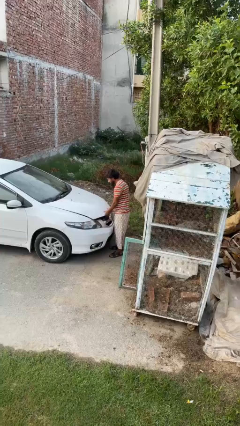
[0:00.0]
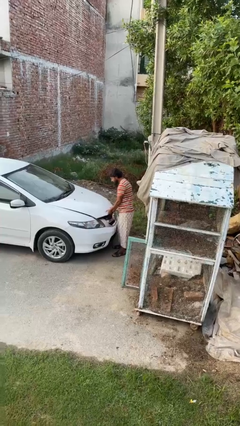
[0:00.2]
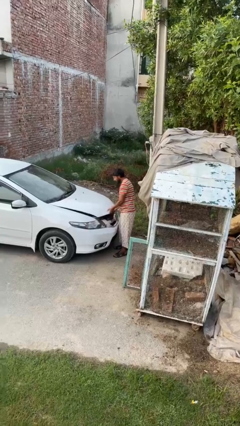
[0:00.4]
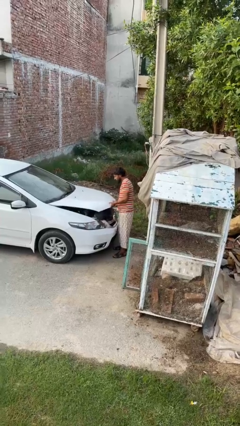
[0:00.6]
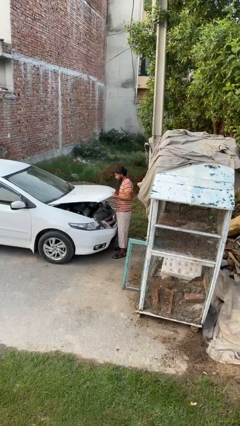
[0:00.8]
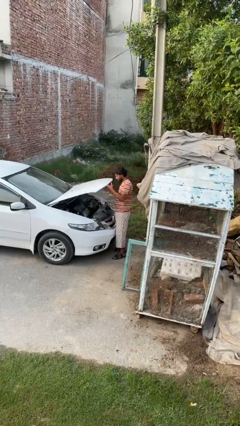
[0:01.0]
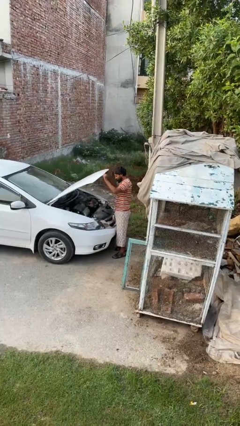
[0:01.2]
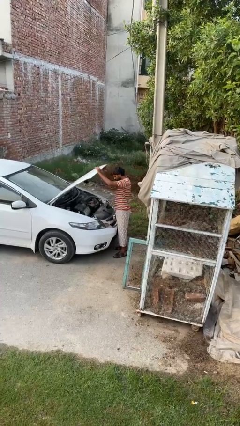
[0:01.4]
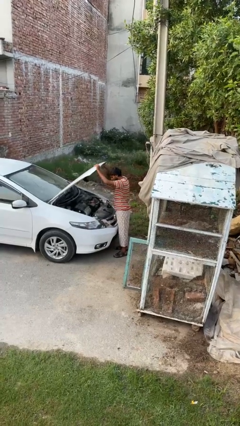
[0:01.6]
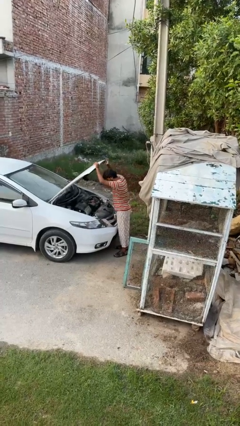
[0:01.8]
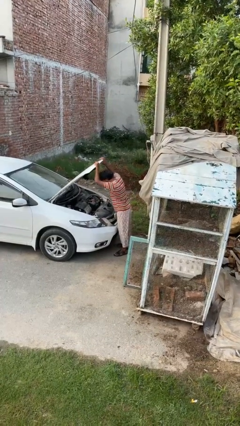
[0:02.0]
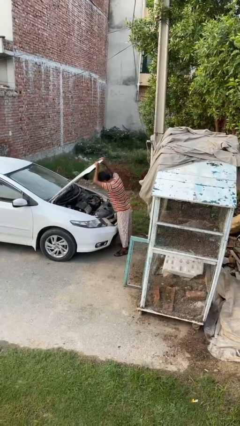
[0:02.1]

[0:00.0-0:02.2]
person opens car hood

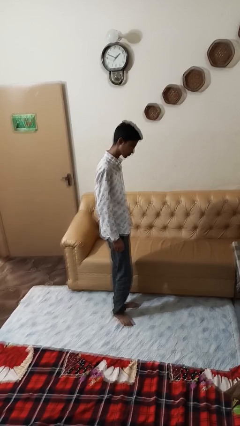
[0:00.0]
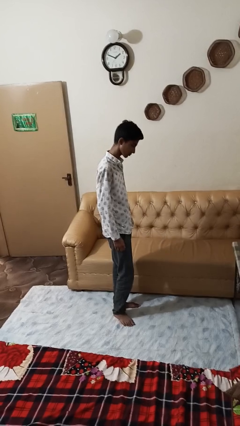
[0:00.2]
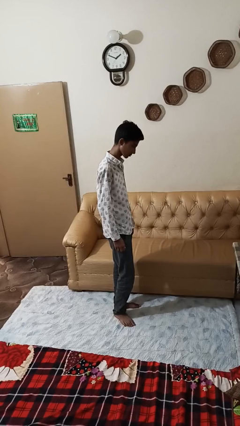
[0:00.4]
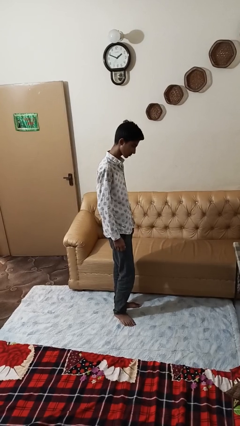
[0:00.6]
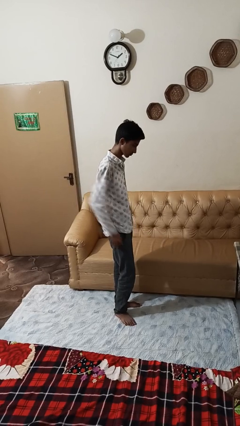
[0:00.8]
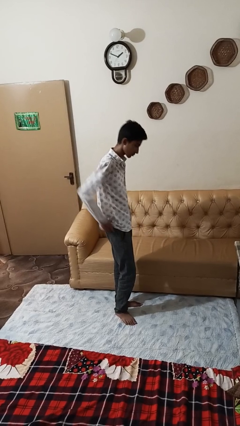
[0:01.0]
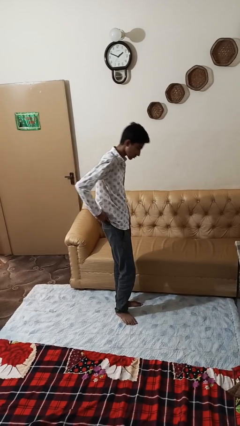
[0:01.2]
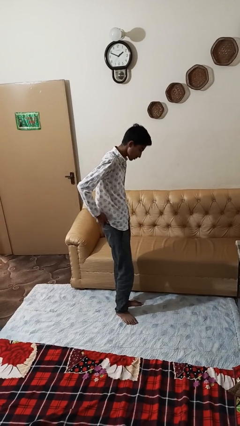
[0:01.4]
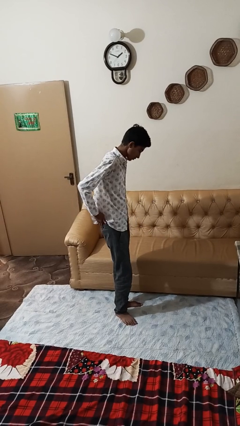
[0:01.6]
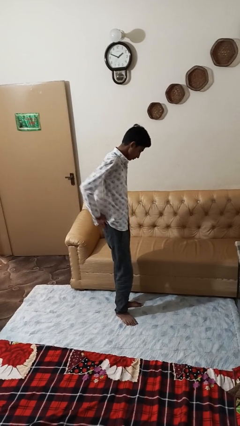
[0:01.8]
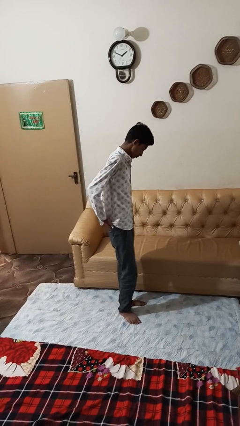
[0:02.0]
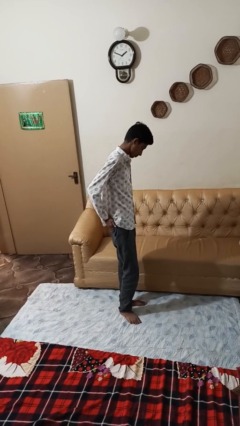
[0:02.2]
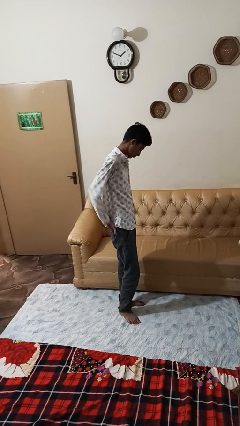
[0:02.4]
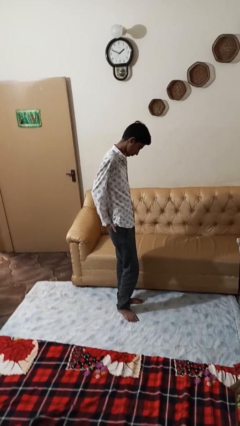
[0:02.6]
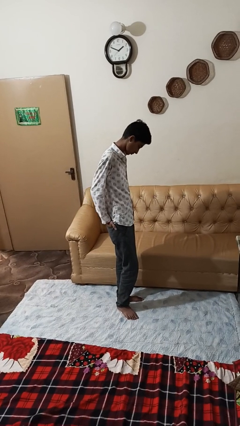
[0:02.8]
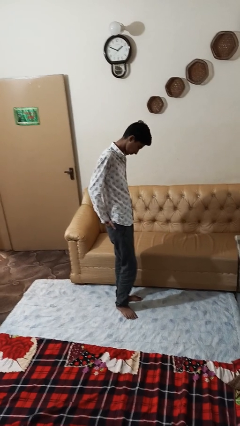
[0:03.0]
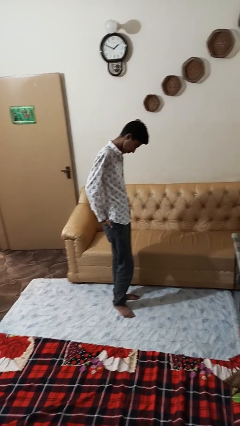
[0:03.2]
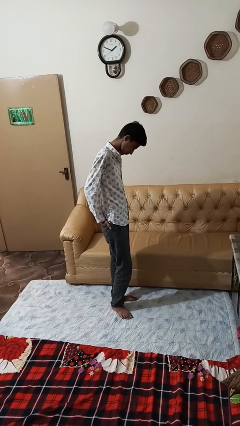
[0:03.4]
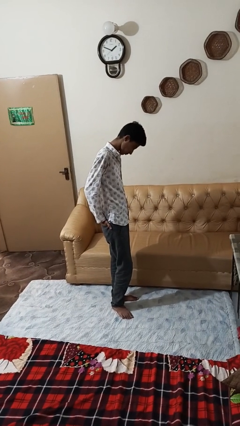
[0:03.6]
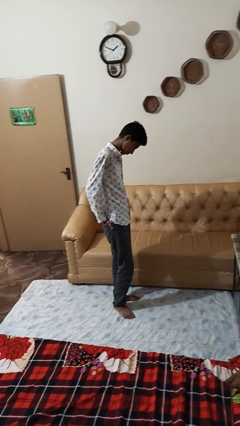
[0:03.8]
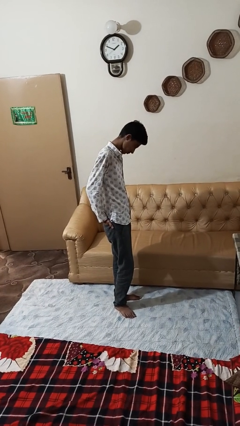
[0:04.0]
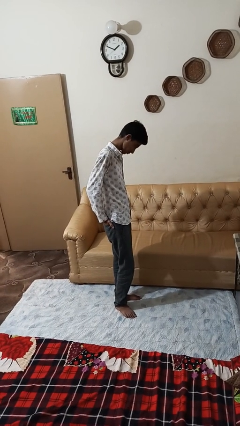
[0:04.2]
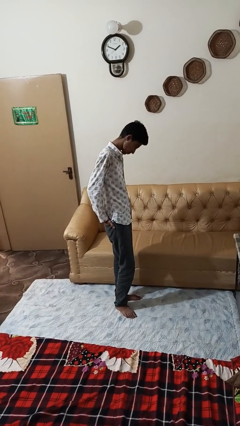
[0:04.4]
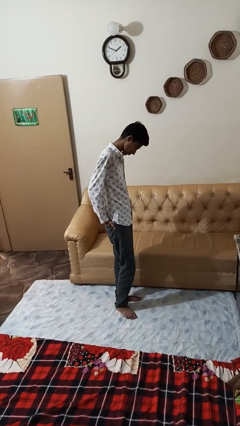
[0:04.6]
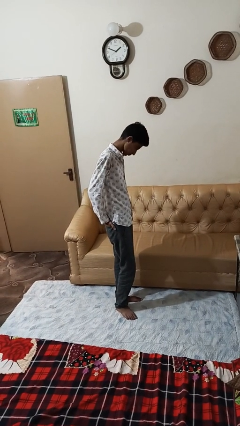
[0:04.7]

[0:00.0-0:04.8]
person puts hands in back pockets

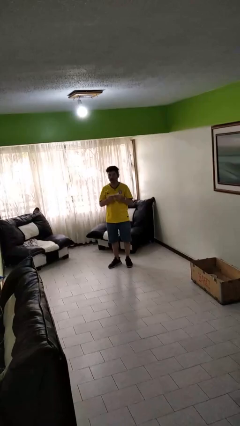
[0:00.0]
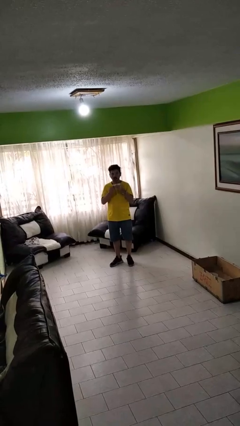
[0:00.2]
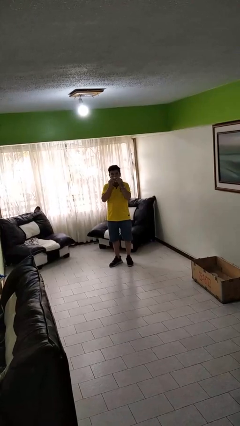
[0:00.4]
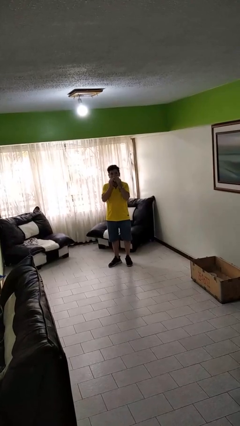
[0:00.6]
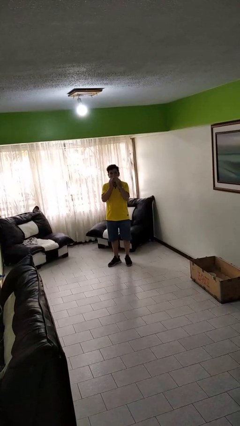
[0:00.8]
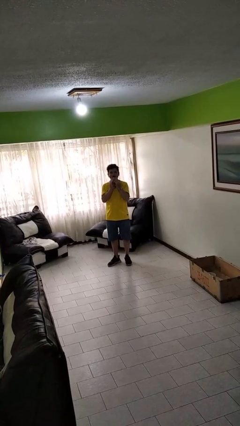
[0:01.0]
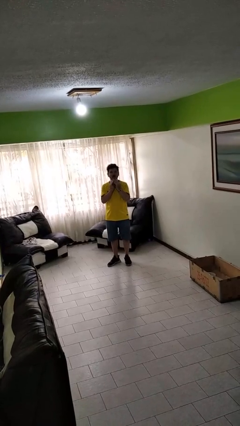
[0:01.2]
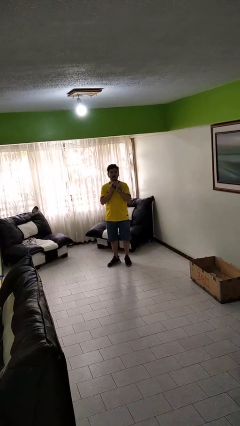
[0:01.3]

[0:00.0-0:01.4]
person wipes mouth with napkin

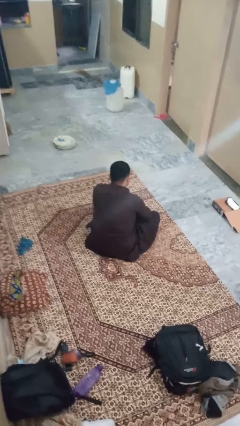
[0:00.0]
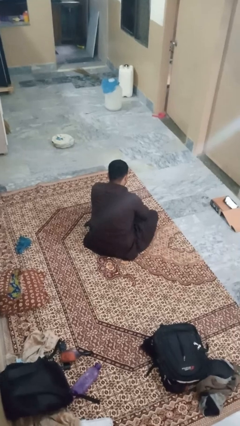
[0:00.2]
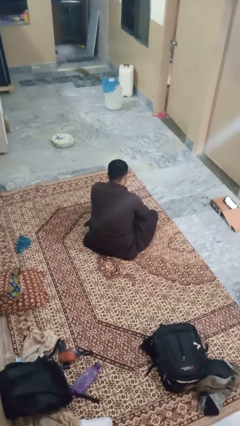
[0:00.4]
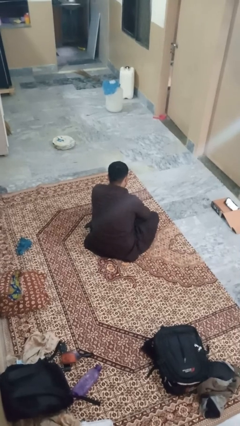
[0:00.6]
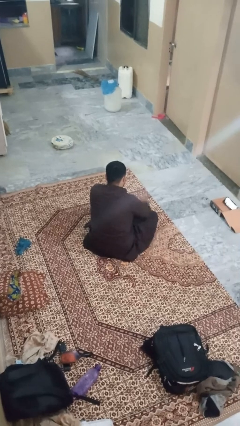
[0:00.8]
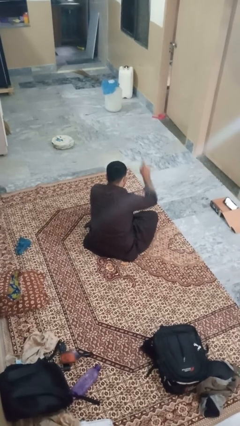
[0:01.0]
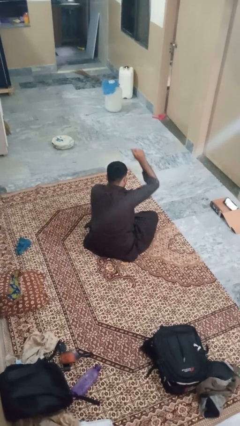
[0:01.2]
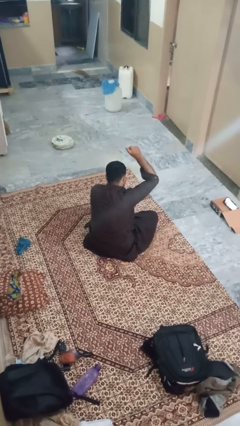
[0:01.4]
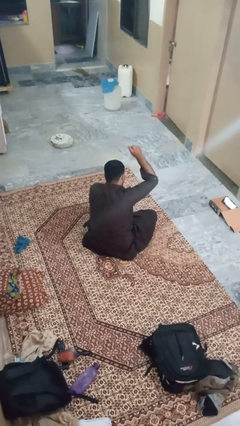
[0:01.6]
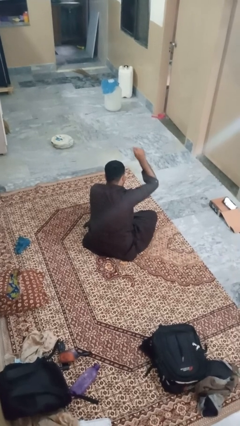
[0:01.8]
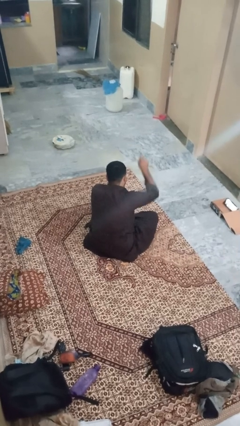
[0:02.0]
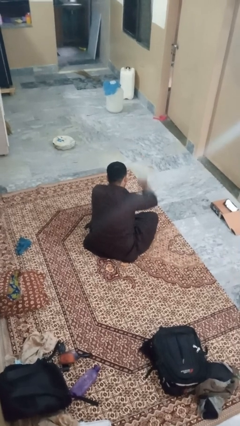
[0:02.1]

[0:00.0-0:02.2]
person gestures number one

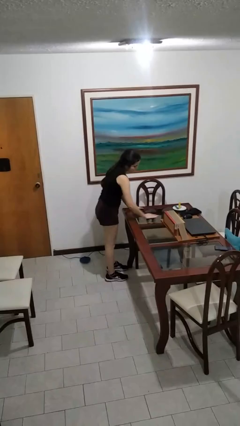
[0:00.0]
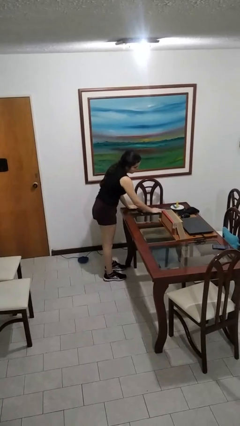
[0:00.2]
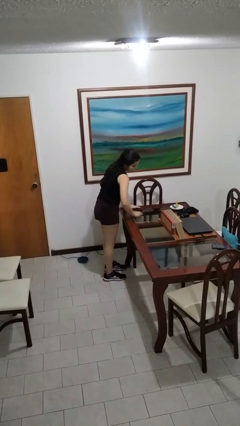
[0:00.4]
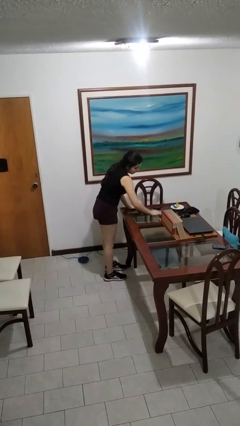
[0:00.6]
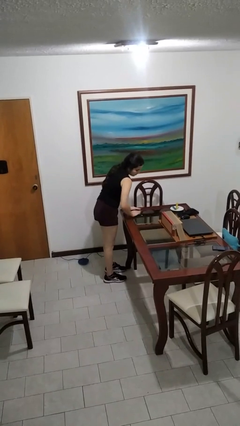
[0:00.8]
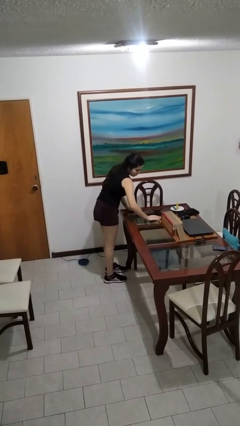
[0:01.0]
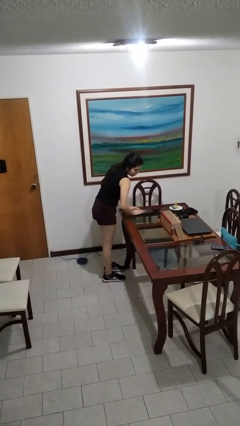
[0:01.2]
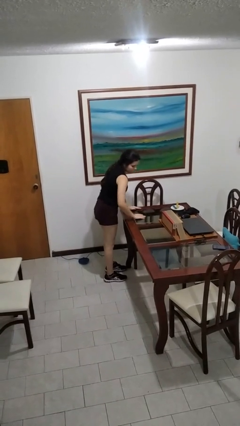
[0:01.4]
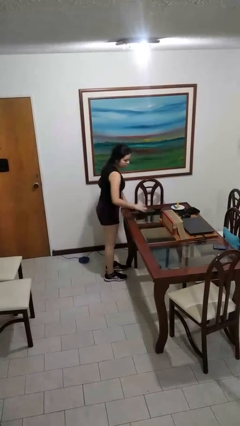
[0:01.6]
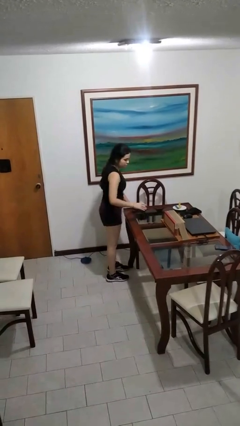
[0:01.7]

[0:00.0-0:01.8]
person cleans table with rag

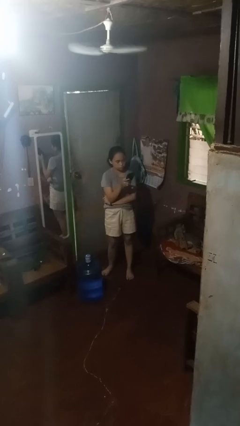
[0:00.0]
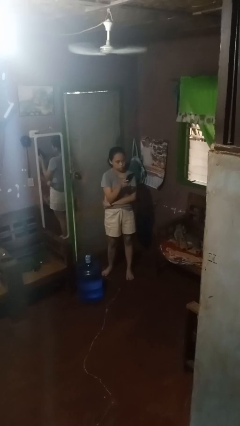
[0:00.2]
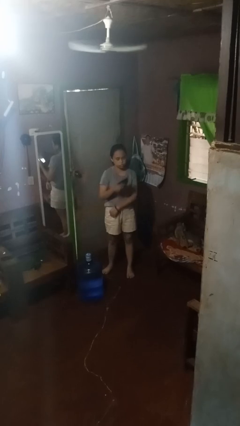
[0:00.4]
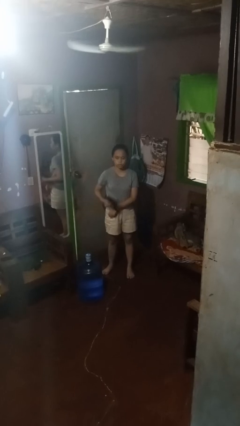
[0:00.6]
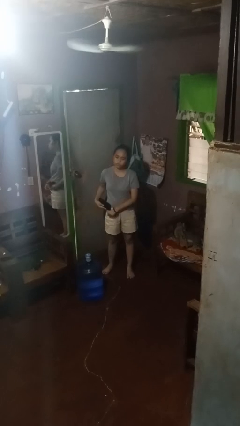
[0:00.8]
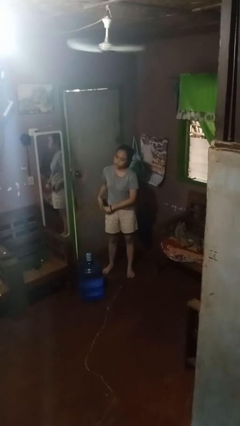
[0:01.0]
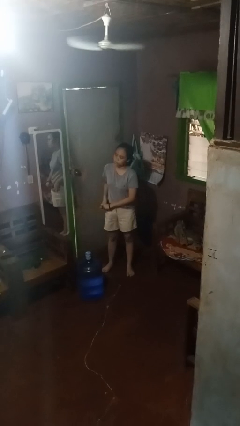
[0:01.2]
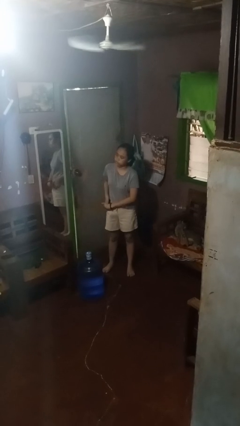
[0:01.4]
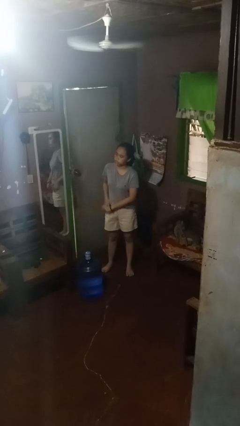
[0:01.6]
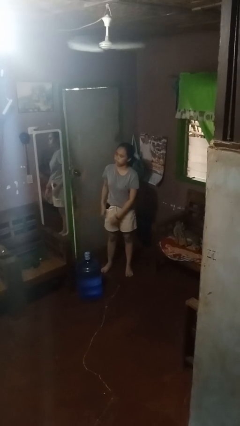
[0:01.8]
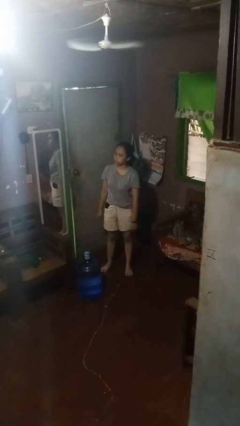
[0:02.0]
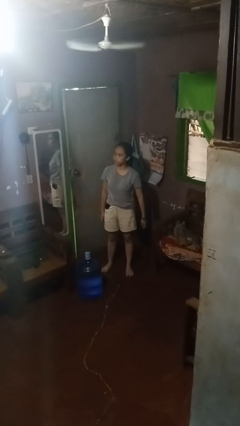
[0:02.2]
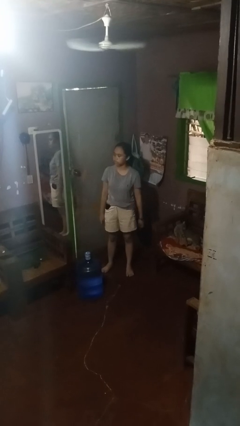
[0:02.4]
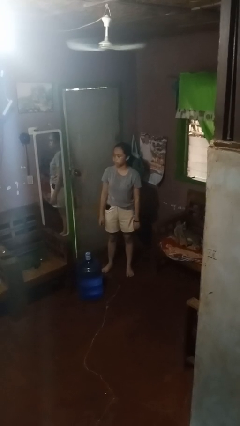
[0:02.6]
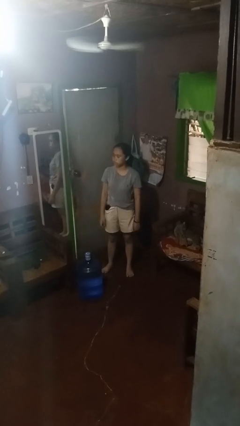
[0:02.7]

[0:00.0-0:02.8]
person puts phone into pocket

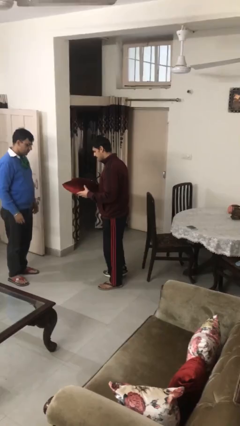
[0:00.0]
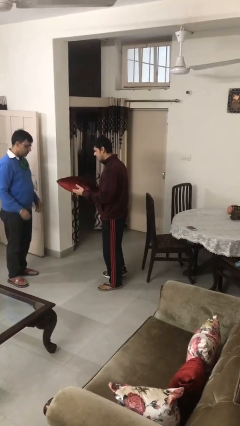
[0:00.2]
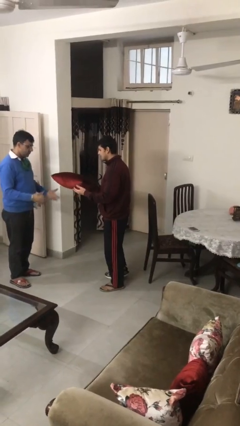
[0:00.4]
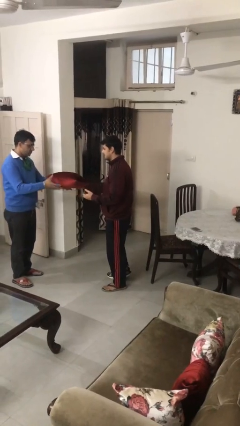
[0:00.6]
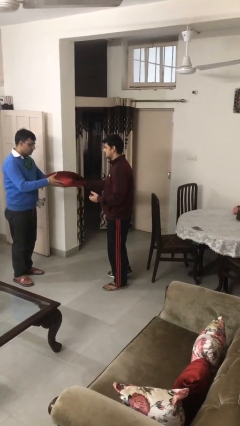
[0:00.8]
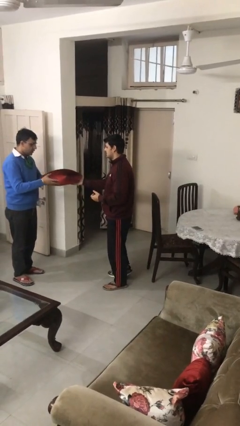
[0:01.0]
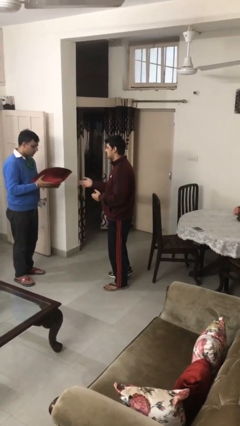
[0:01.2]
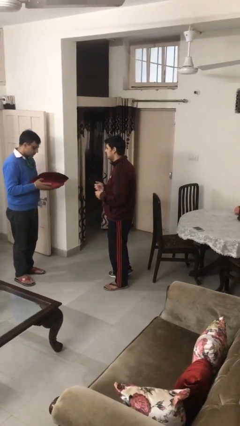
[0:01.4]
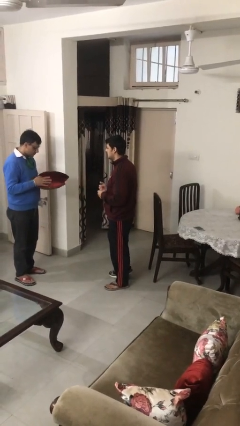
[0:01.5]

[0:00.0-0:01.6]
person transfers object to person

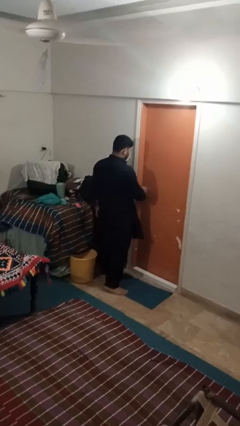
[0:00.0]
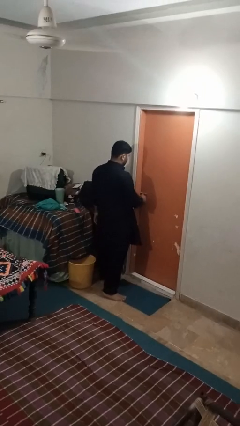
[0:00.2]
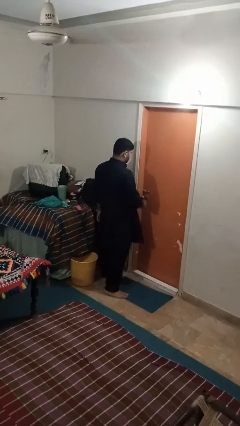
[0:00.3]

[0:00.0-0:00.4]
person locks door with keys
